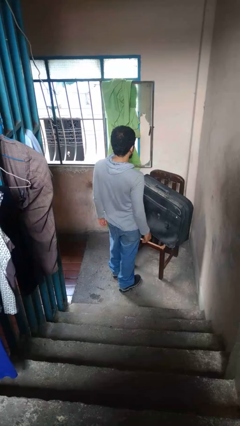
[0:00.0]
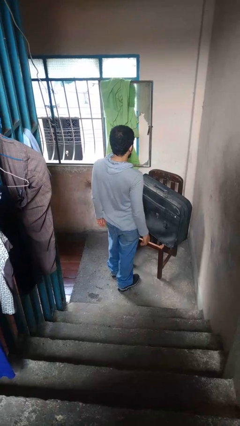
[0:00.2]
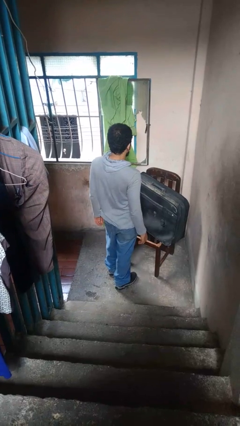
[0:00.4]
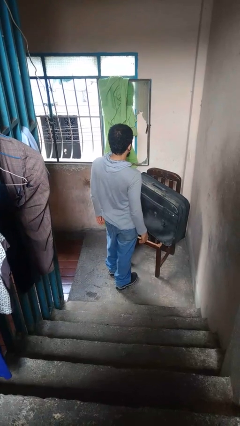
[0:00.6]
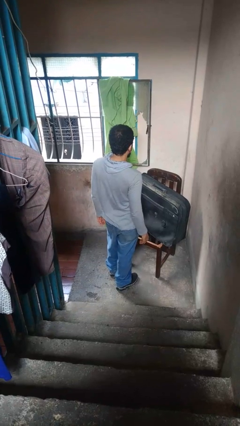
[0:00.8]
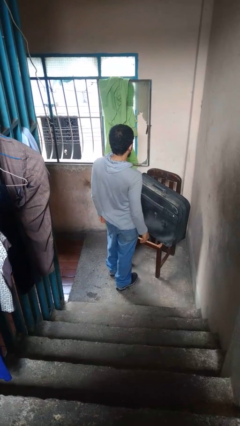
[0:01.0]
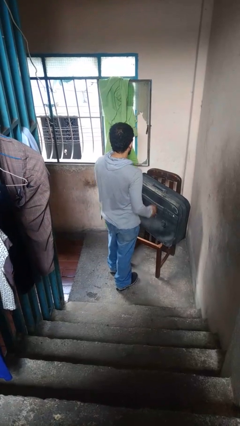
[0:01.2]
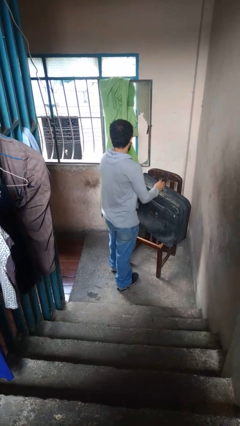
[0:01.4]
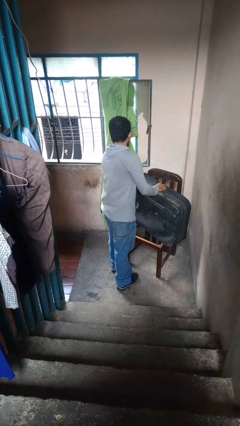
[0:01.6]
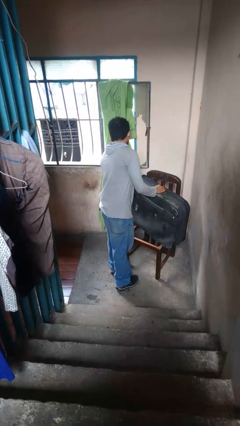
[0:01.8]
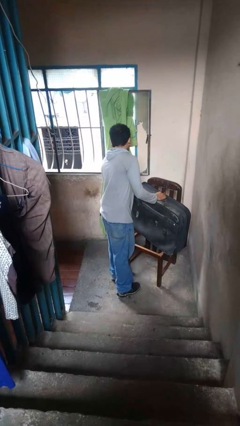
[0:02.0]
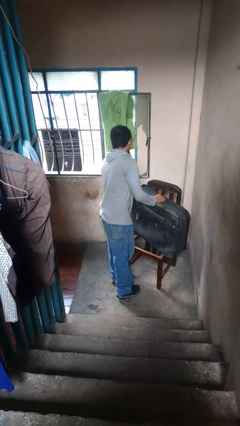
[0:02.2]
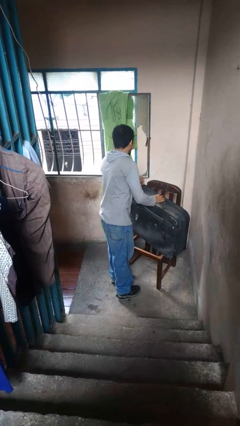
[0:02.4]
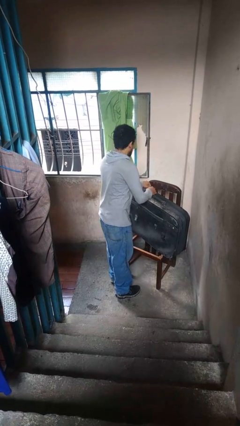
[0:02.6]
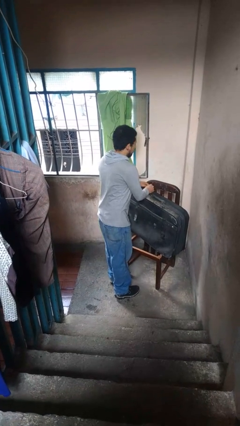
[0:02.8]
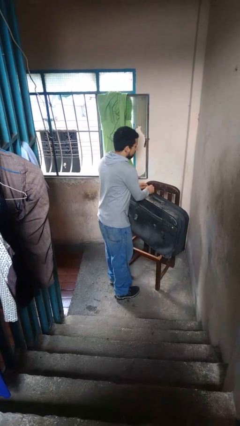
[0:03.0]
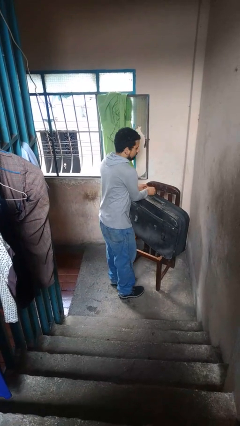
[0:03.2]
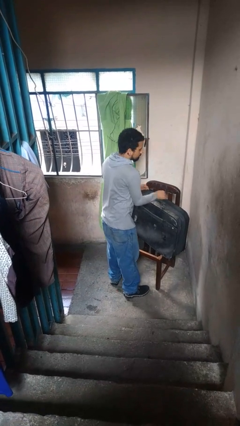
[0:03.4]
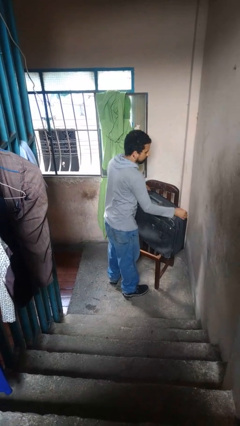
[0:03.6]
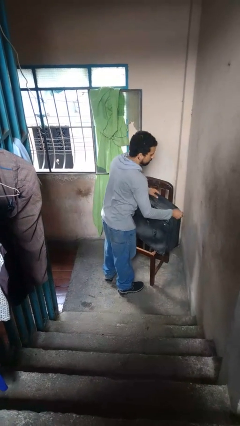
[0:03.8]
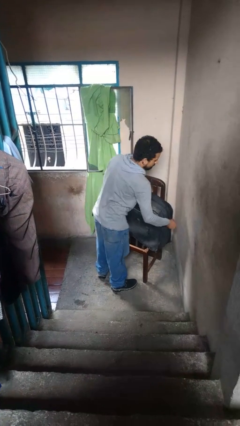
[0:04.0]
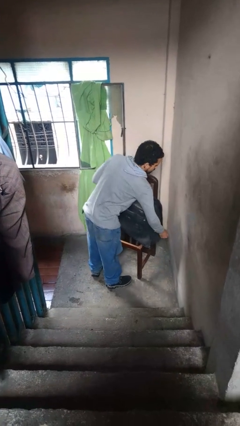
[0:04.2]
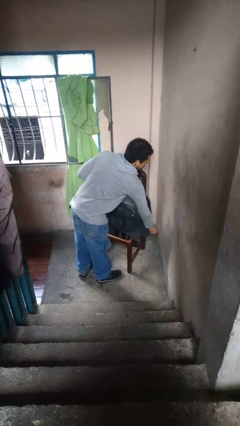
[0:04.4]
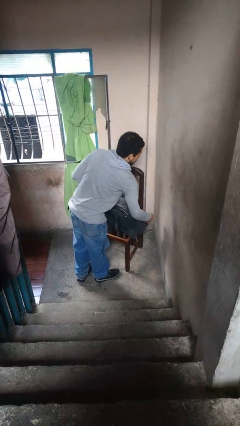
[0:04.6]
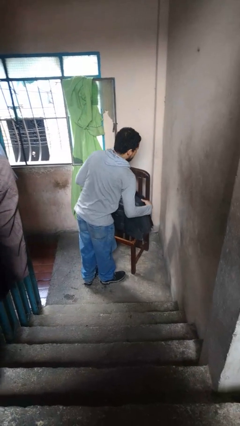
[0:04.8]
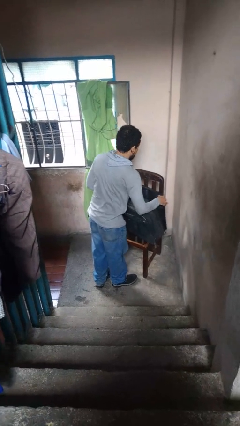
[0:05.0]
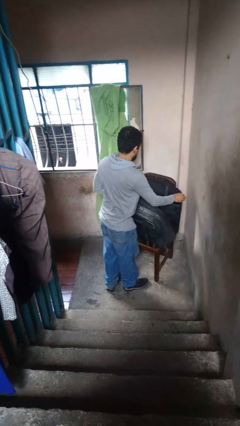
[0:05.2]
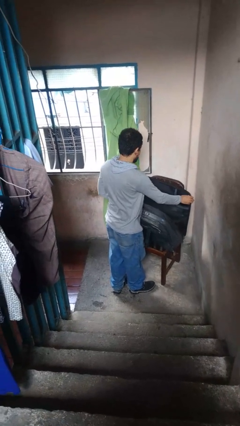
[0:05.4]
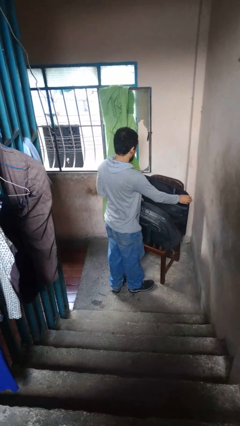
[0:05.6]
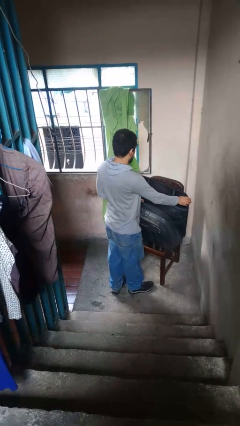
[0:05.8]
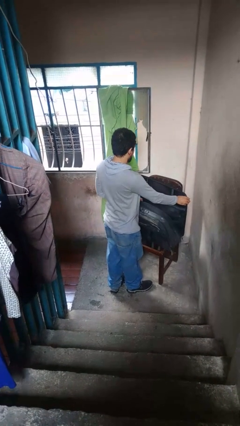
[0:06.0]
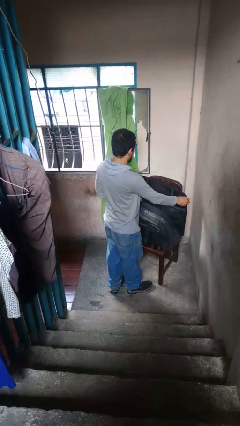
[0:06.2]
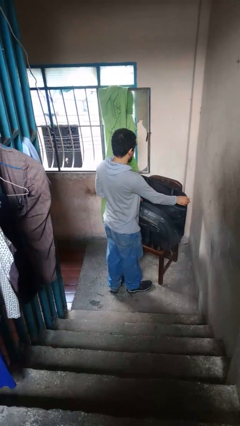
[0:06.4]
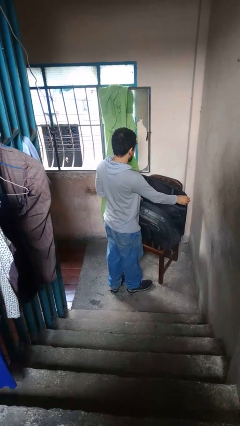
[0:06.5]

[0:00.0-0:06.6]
person opens suitcase

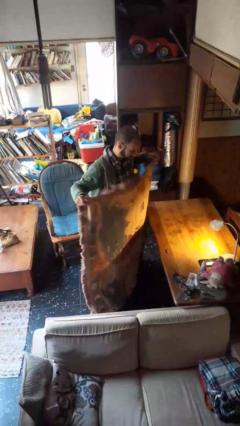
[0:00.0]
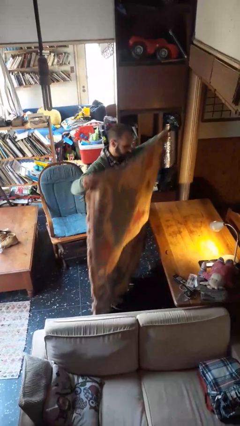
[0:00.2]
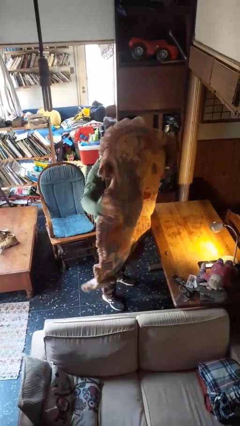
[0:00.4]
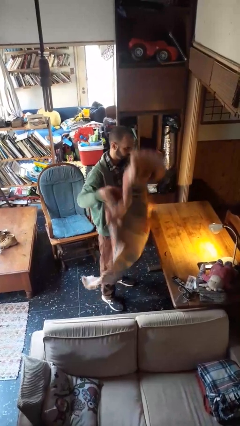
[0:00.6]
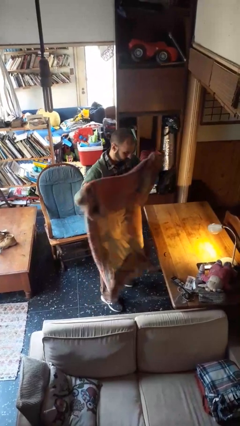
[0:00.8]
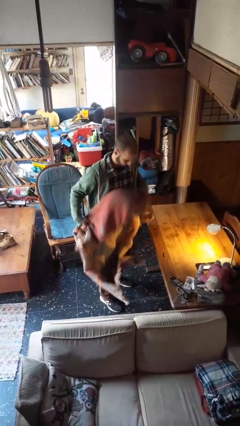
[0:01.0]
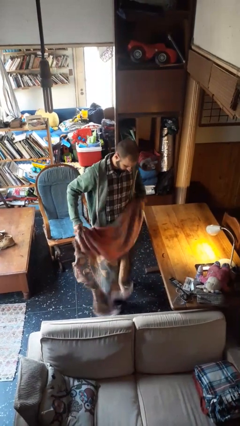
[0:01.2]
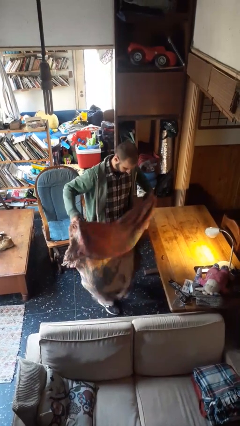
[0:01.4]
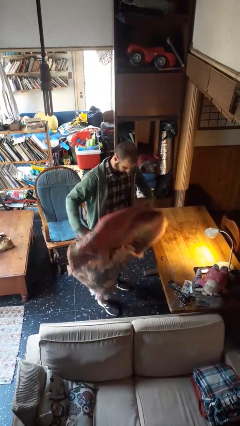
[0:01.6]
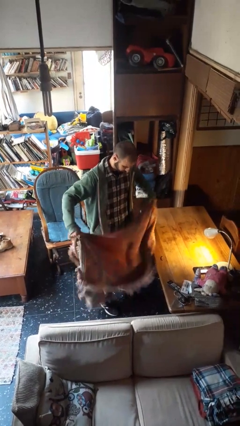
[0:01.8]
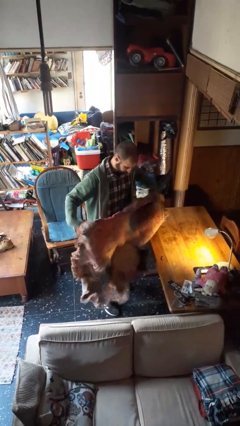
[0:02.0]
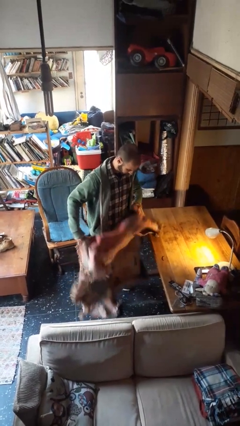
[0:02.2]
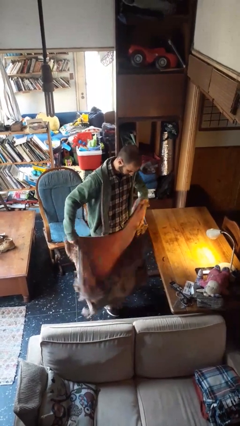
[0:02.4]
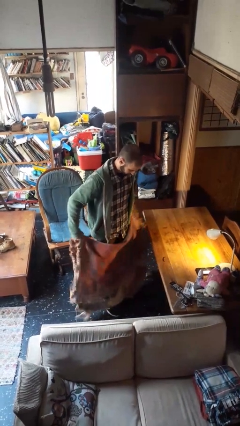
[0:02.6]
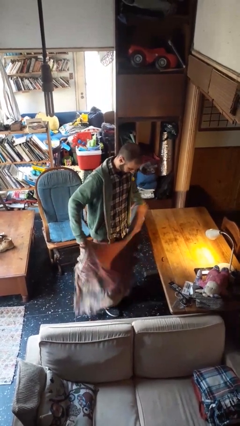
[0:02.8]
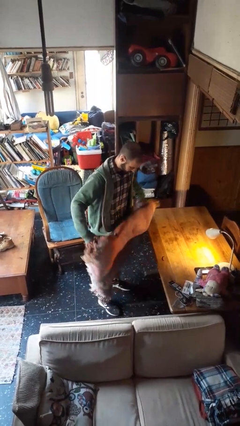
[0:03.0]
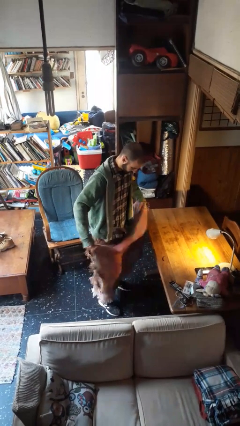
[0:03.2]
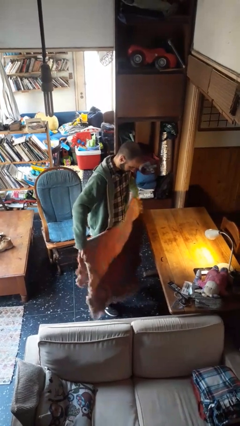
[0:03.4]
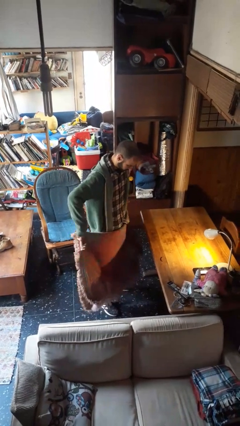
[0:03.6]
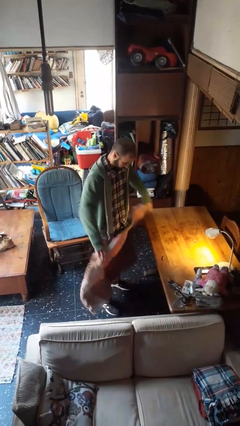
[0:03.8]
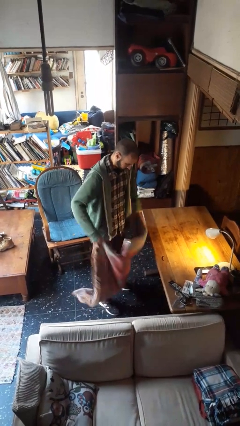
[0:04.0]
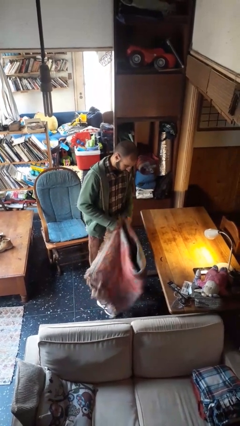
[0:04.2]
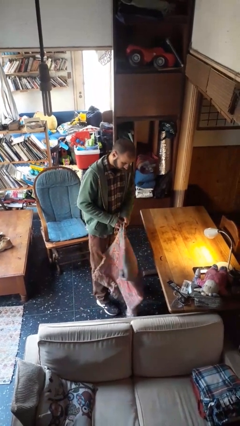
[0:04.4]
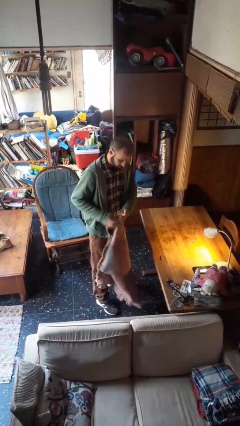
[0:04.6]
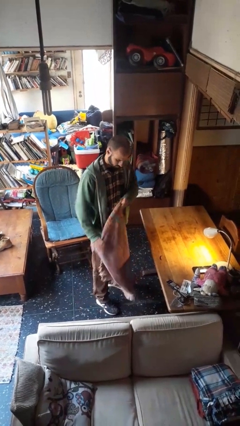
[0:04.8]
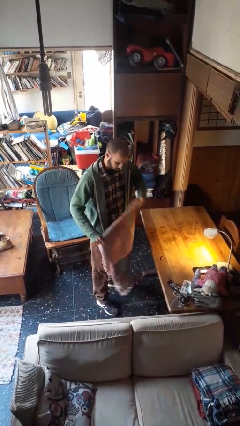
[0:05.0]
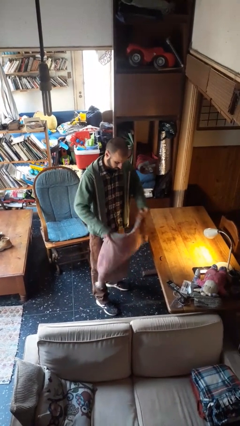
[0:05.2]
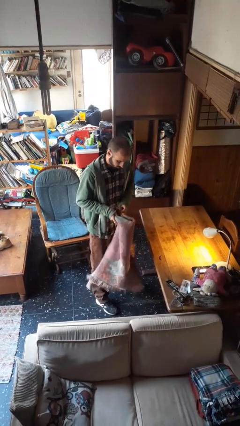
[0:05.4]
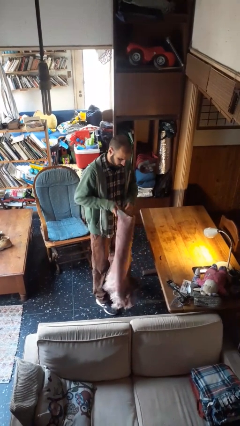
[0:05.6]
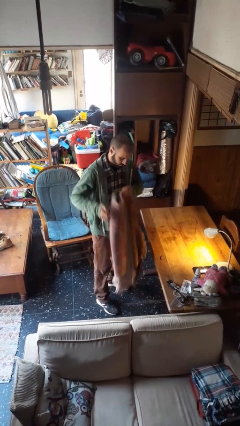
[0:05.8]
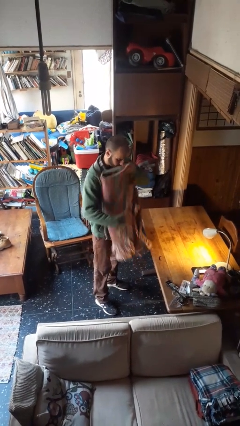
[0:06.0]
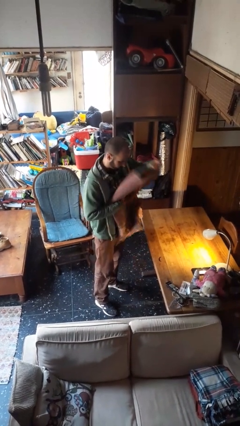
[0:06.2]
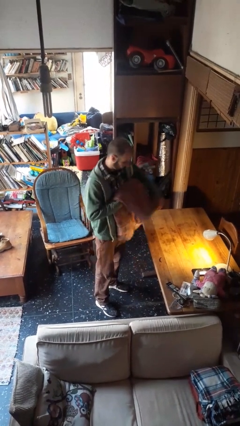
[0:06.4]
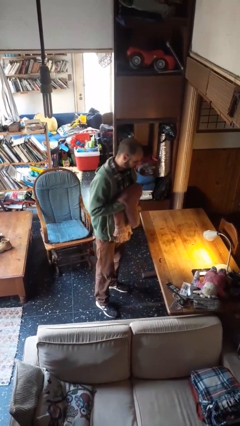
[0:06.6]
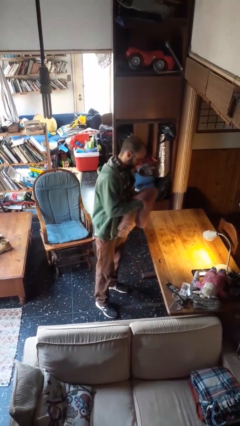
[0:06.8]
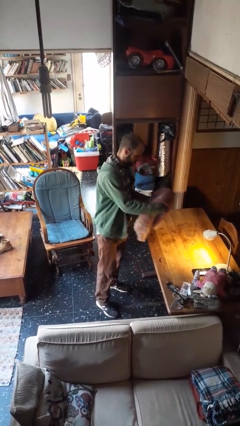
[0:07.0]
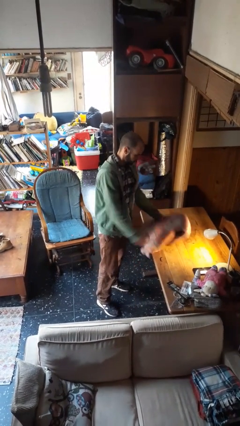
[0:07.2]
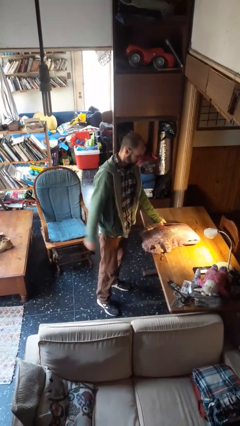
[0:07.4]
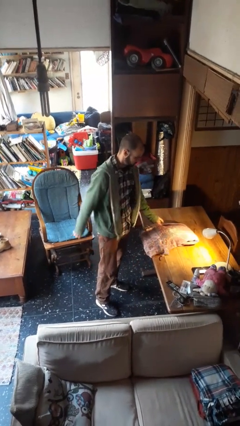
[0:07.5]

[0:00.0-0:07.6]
person folds blanket

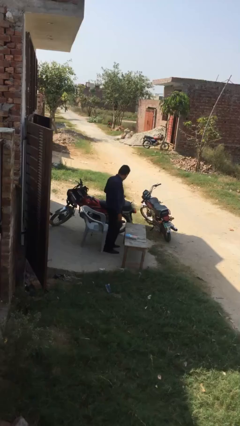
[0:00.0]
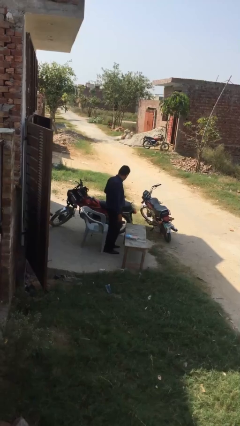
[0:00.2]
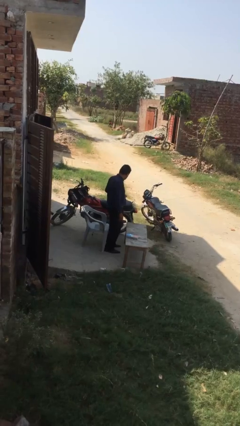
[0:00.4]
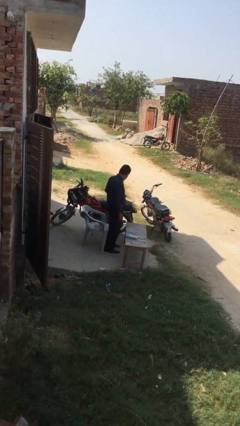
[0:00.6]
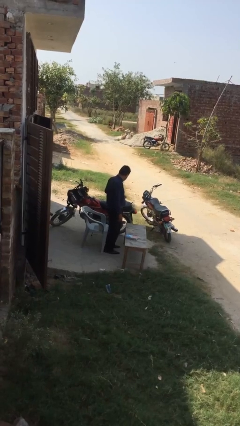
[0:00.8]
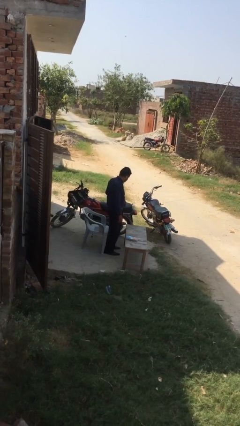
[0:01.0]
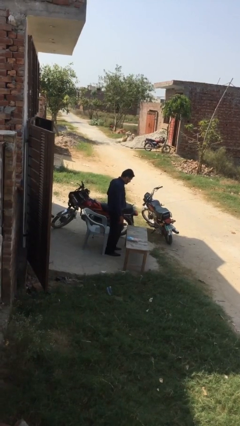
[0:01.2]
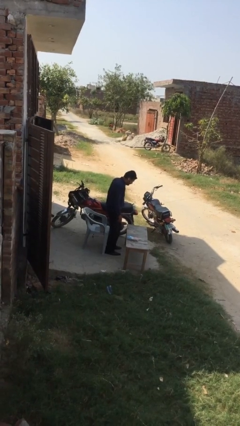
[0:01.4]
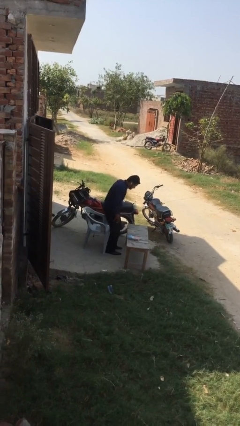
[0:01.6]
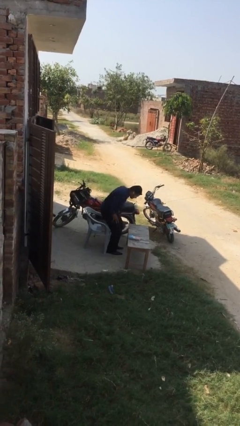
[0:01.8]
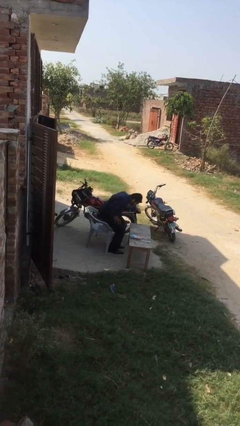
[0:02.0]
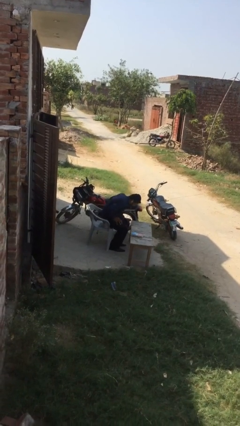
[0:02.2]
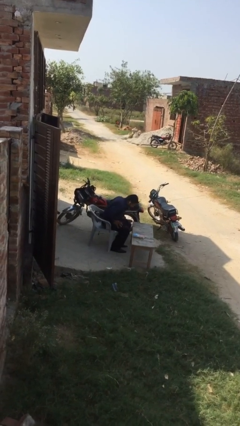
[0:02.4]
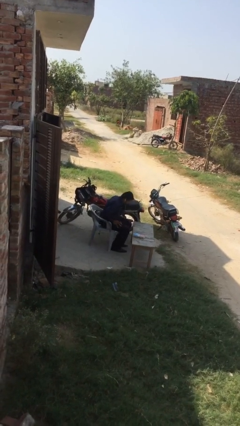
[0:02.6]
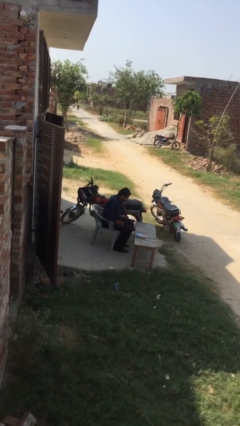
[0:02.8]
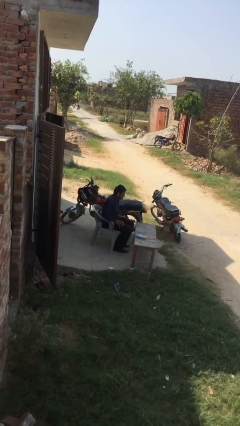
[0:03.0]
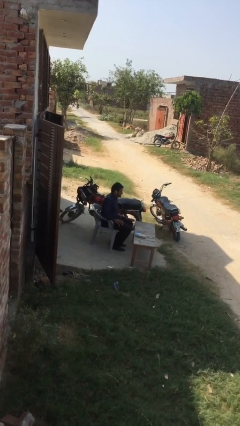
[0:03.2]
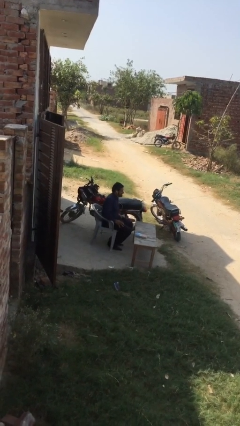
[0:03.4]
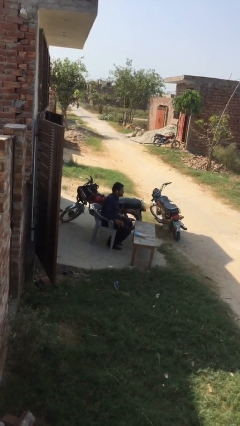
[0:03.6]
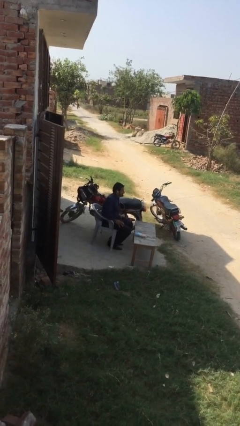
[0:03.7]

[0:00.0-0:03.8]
person sits down
